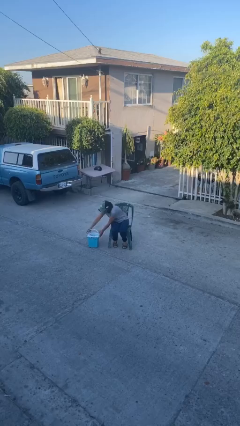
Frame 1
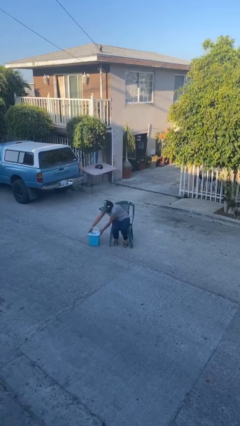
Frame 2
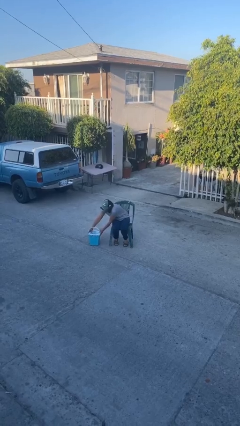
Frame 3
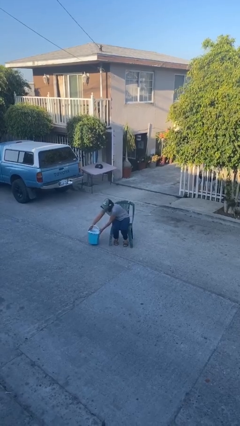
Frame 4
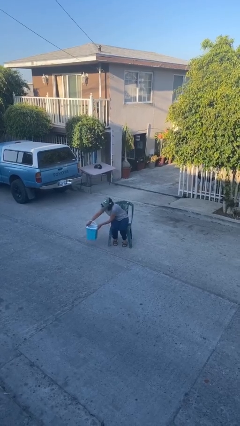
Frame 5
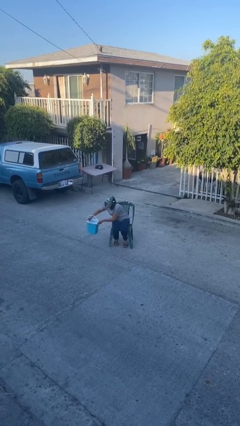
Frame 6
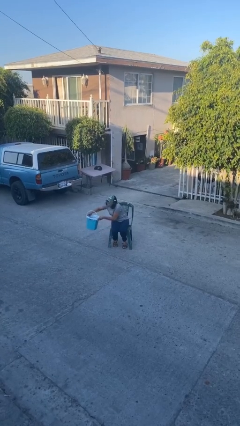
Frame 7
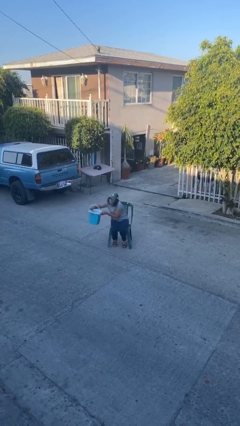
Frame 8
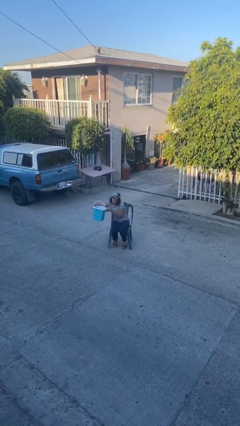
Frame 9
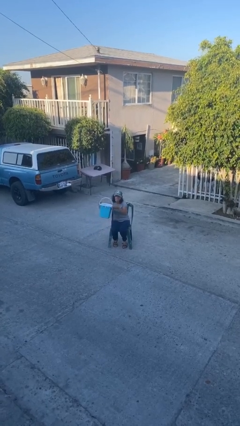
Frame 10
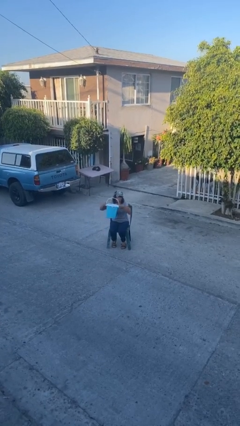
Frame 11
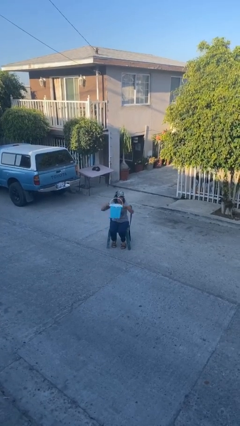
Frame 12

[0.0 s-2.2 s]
person picks up object from floor

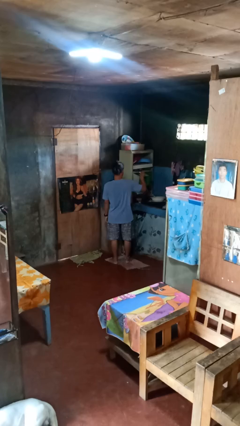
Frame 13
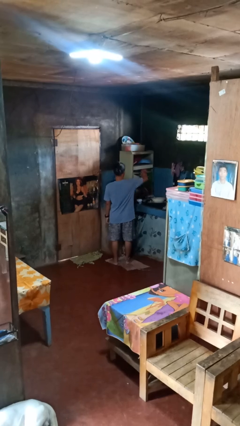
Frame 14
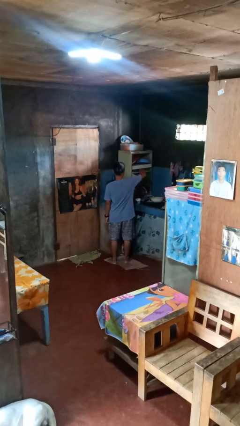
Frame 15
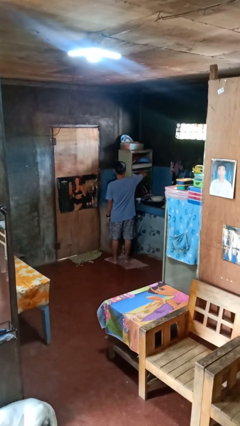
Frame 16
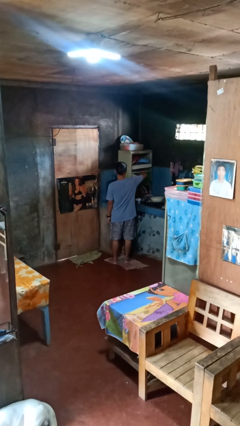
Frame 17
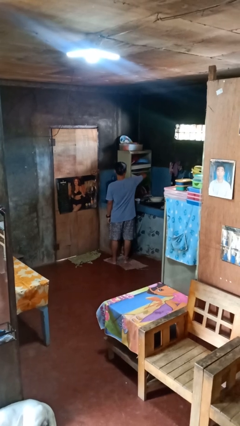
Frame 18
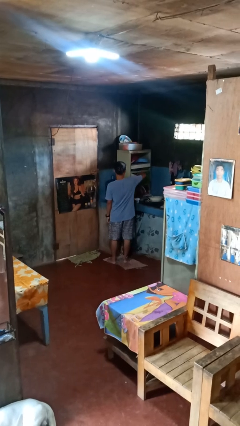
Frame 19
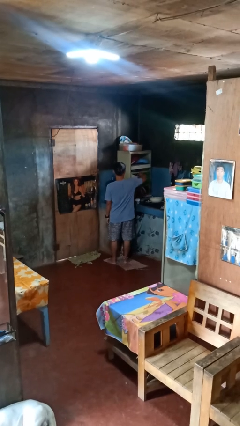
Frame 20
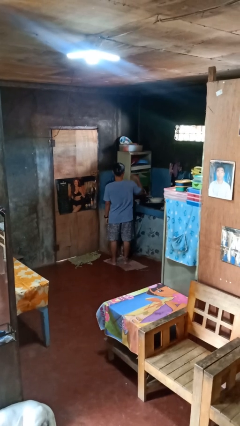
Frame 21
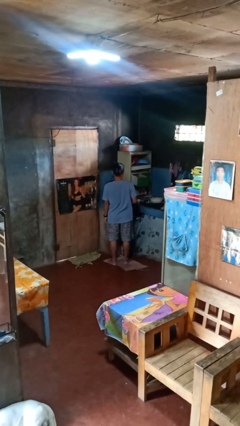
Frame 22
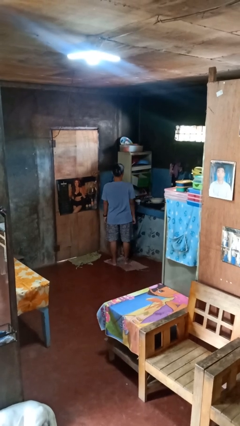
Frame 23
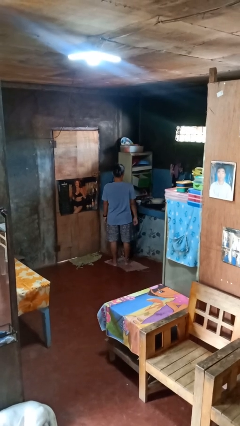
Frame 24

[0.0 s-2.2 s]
person puts object into kitchen drawer

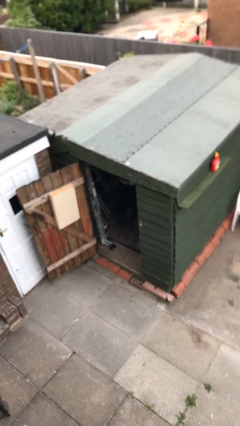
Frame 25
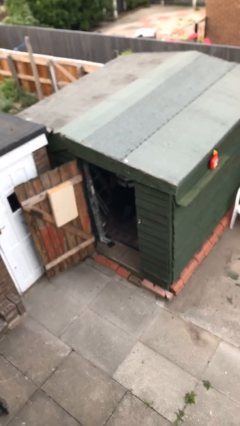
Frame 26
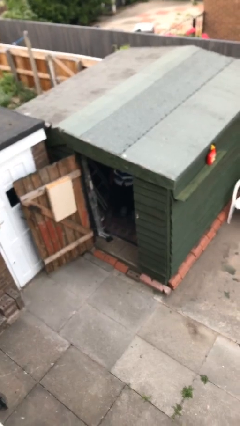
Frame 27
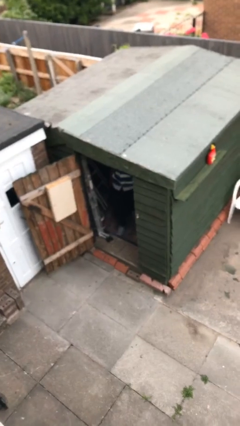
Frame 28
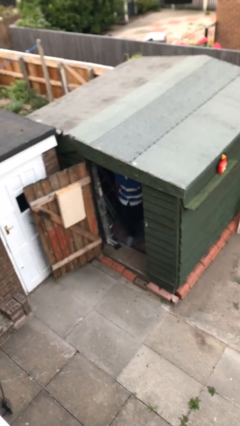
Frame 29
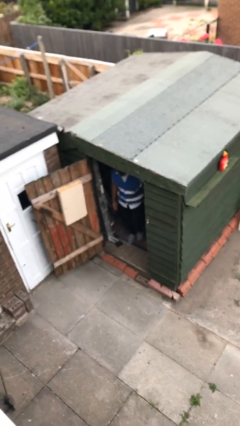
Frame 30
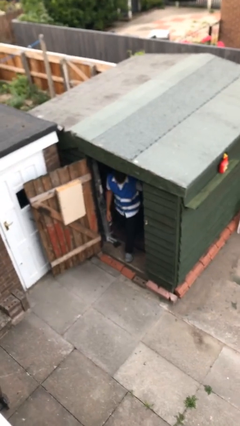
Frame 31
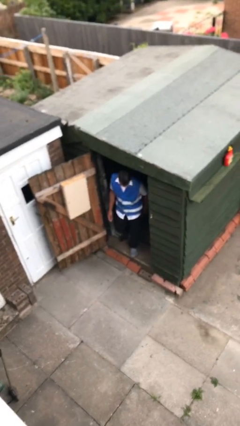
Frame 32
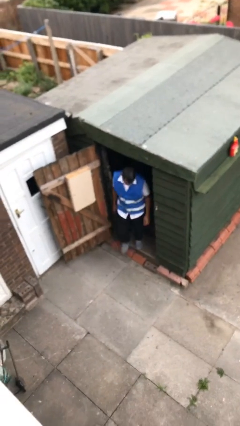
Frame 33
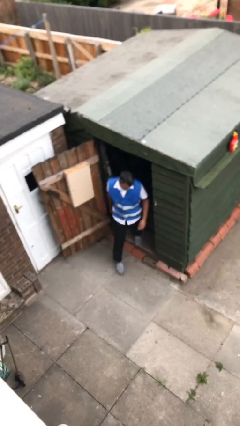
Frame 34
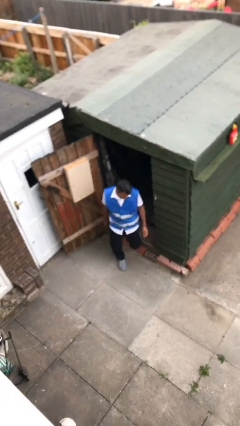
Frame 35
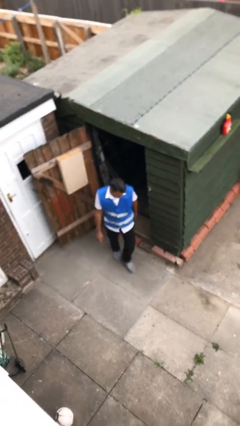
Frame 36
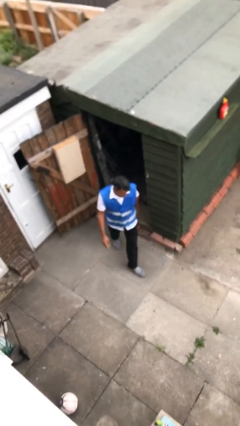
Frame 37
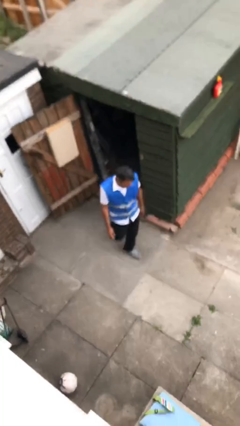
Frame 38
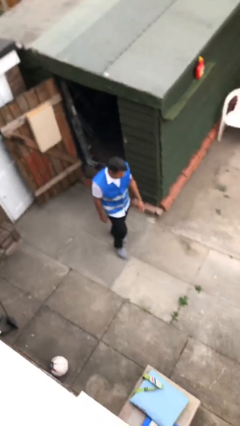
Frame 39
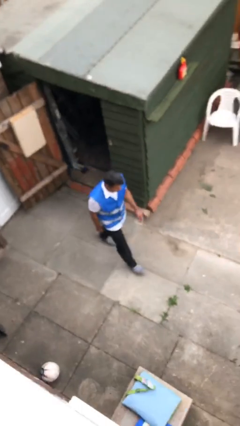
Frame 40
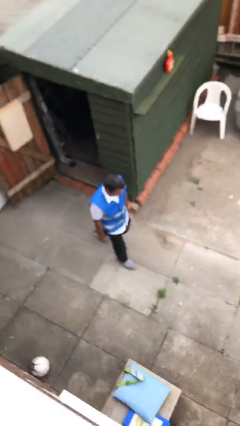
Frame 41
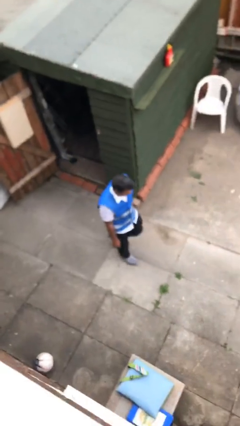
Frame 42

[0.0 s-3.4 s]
person enters scene through structure

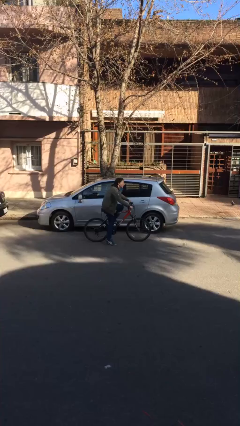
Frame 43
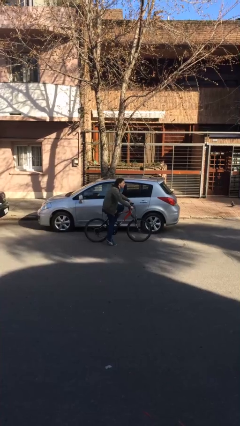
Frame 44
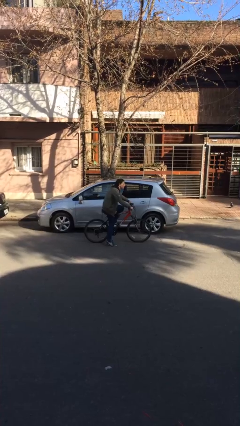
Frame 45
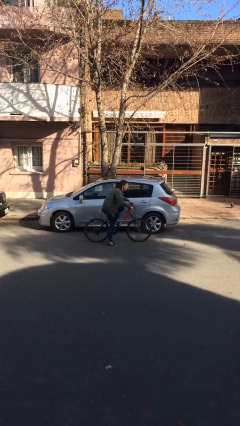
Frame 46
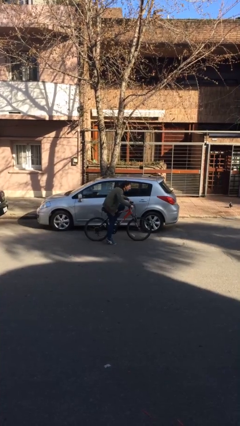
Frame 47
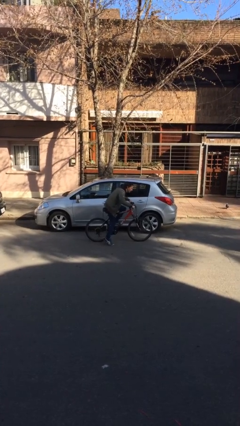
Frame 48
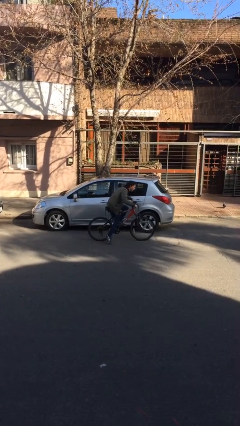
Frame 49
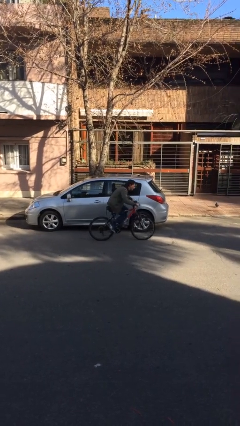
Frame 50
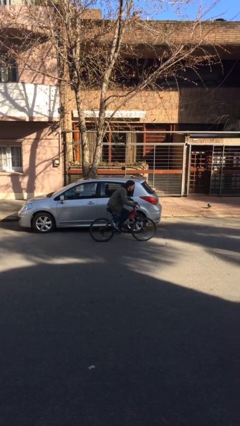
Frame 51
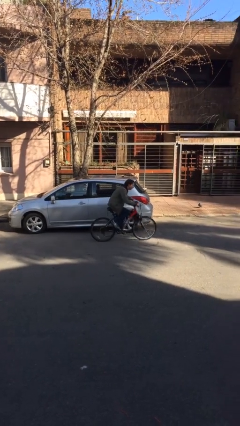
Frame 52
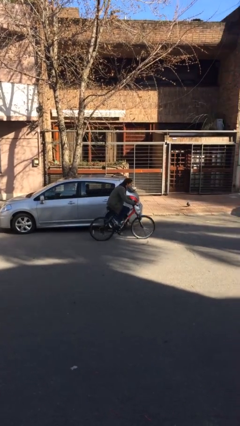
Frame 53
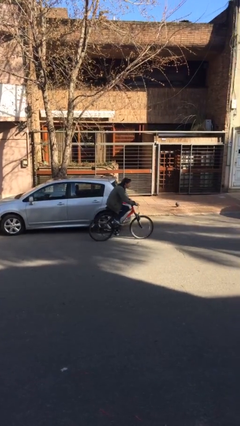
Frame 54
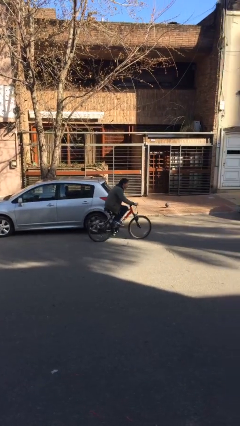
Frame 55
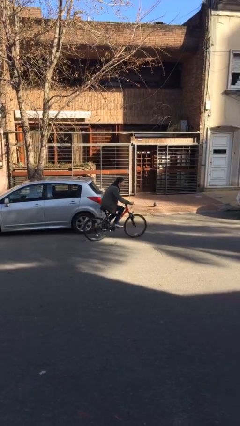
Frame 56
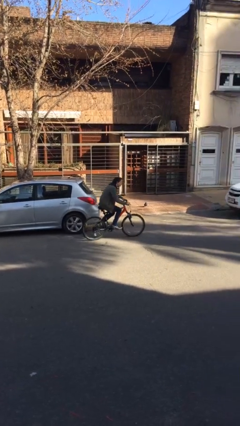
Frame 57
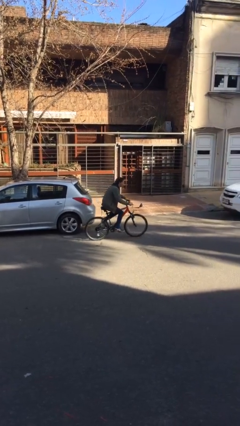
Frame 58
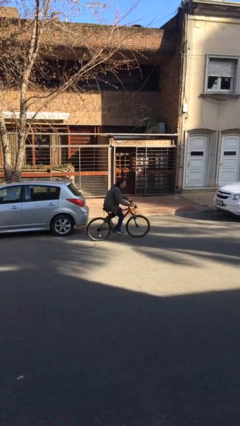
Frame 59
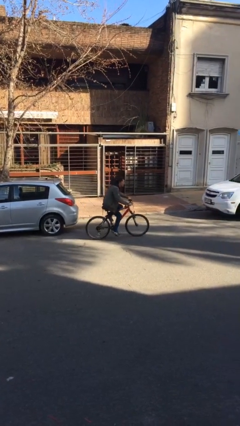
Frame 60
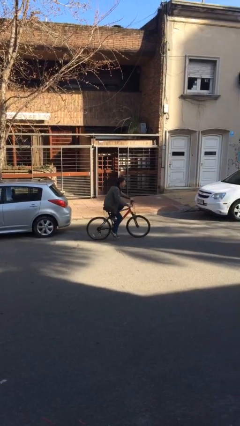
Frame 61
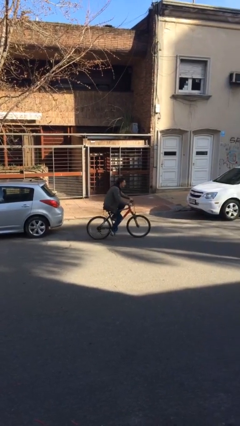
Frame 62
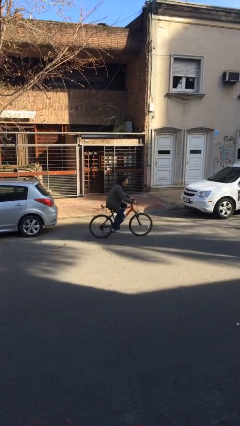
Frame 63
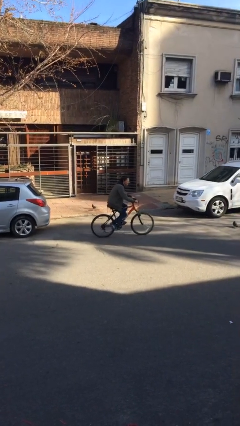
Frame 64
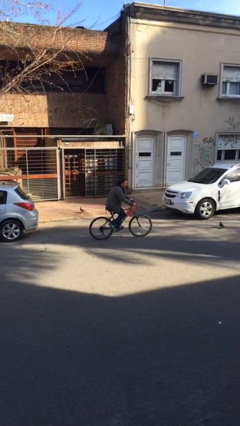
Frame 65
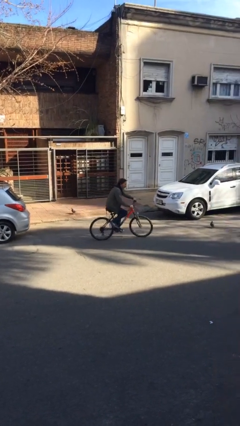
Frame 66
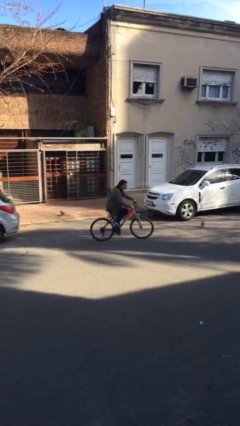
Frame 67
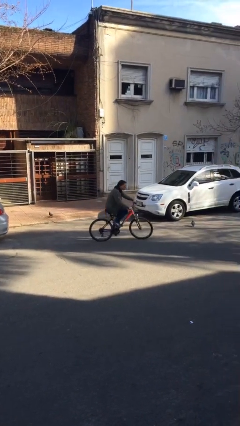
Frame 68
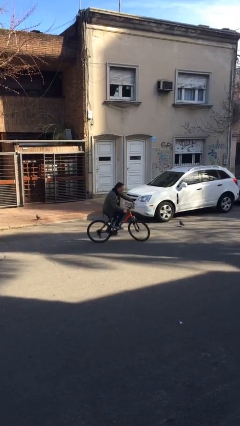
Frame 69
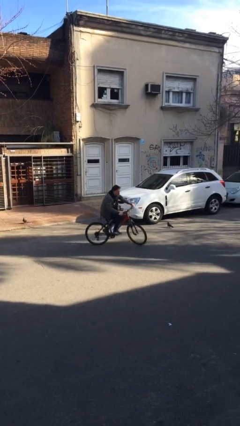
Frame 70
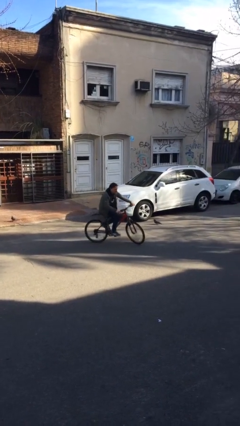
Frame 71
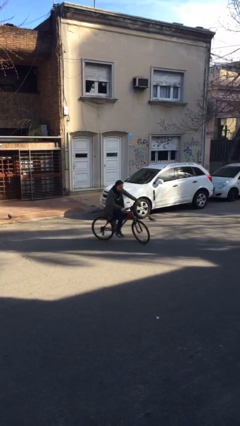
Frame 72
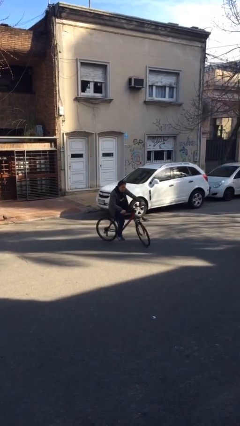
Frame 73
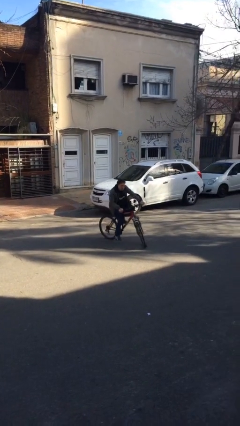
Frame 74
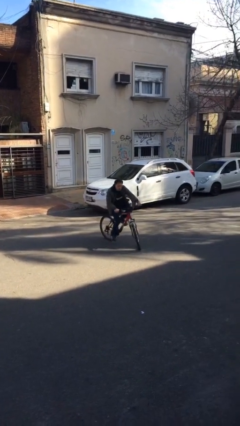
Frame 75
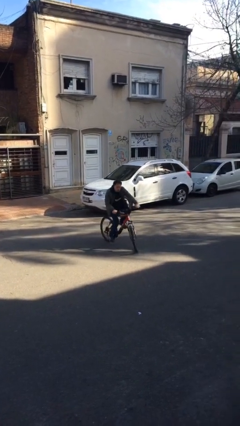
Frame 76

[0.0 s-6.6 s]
person rides bicycle

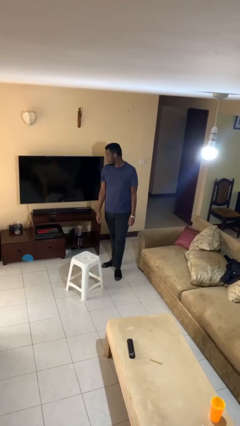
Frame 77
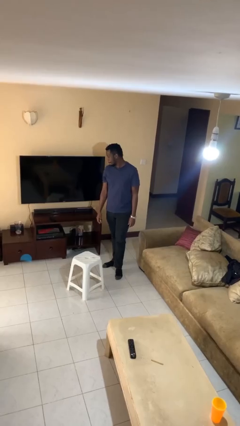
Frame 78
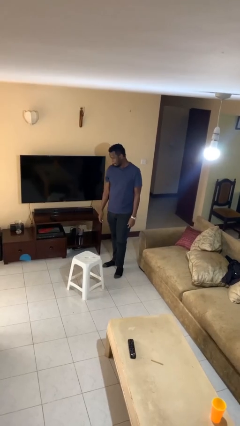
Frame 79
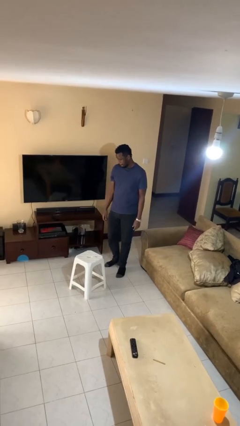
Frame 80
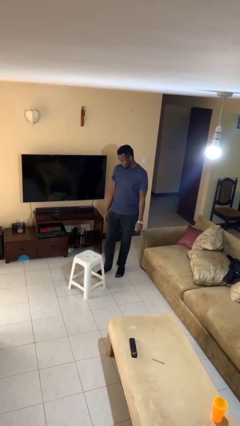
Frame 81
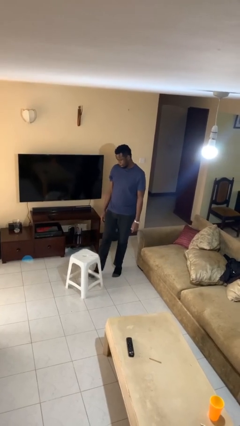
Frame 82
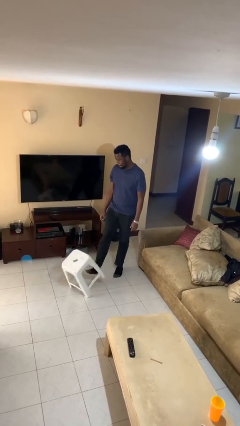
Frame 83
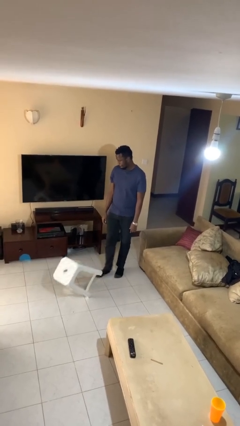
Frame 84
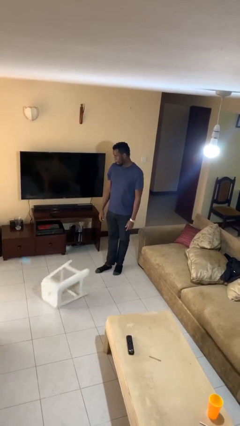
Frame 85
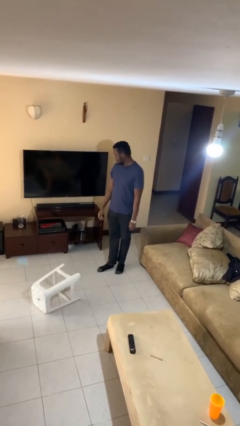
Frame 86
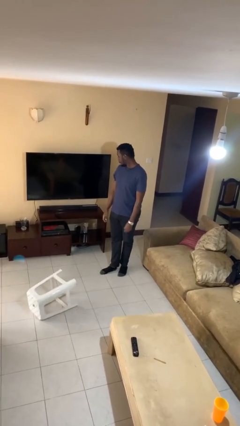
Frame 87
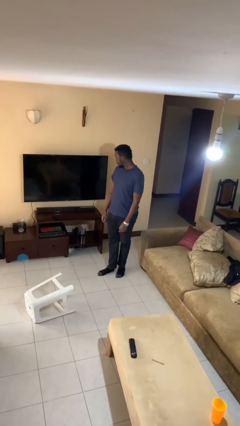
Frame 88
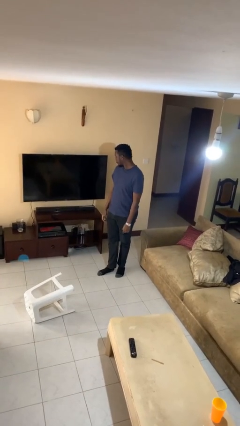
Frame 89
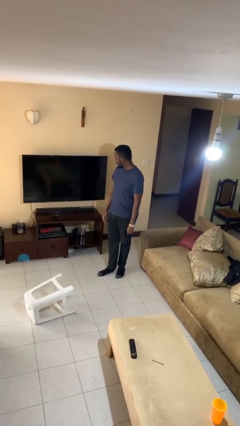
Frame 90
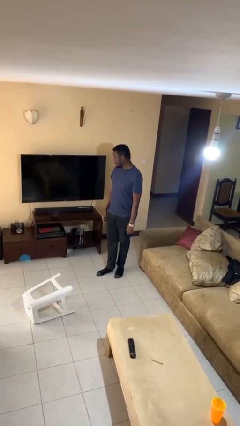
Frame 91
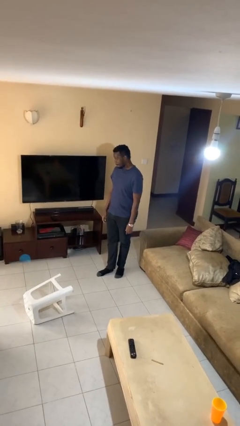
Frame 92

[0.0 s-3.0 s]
person knocks over furniture
